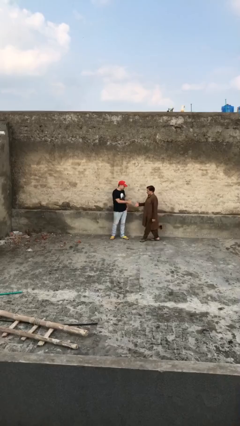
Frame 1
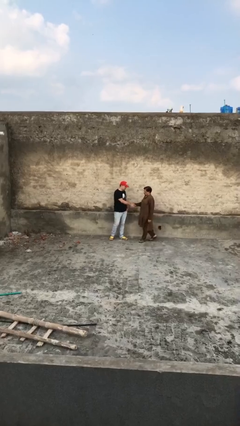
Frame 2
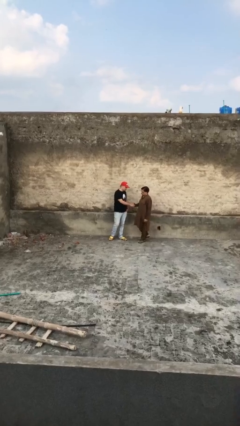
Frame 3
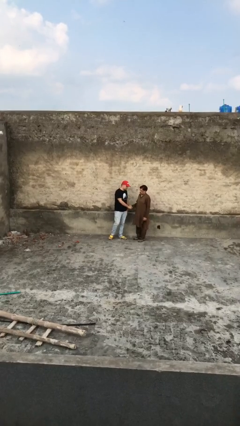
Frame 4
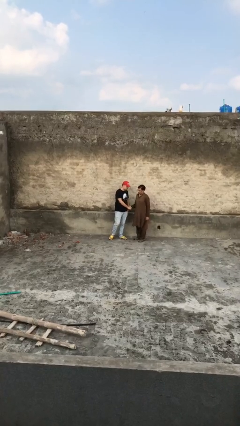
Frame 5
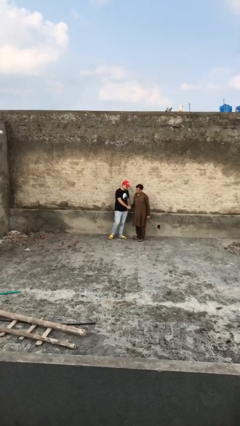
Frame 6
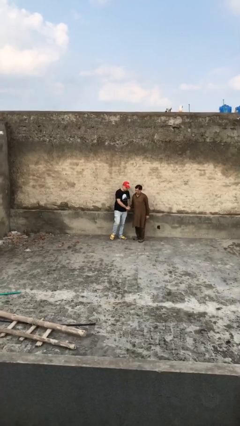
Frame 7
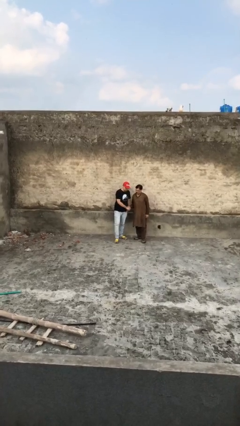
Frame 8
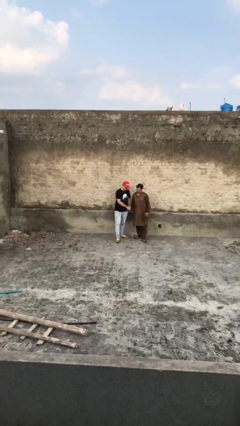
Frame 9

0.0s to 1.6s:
person shakes hand

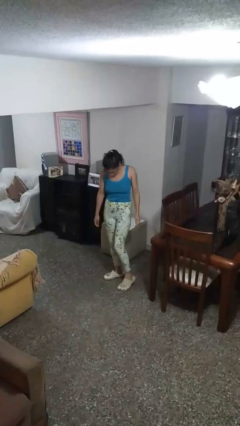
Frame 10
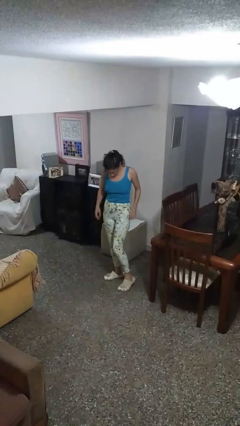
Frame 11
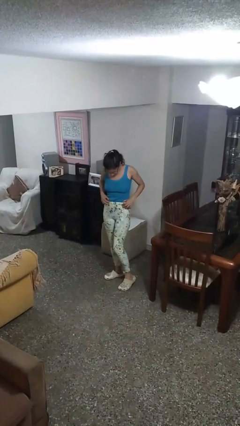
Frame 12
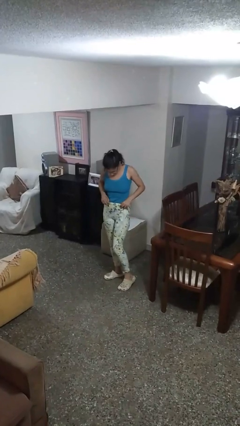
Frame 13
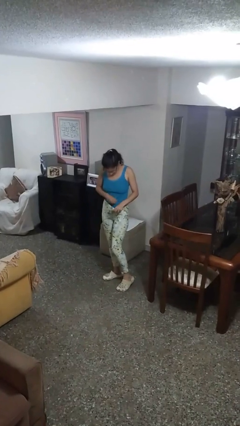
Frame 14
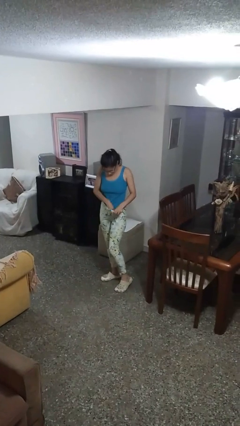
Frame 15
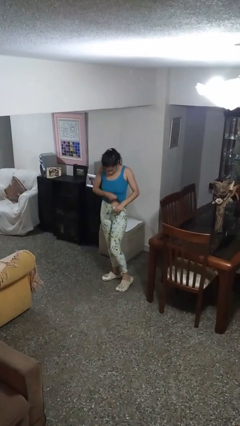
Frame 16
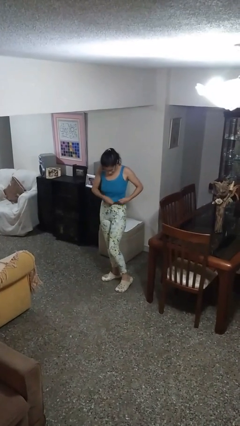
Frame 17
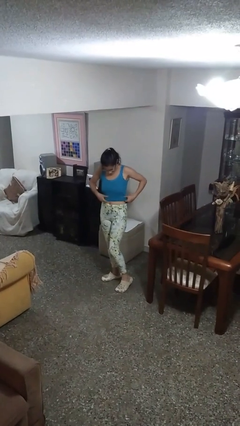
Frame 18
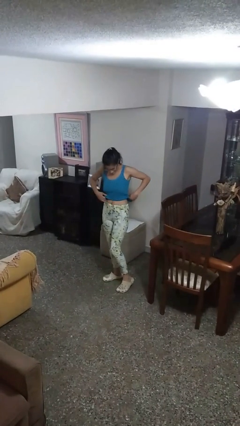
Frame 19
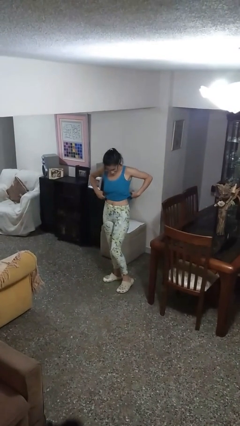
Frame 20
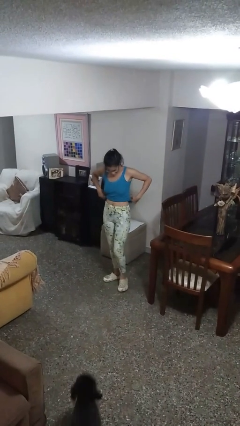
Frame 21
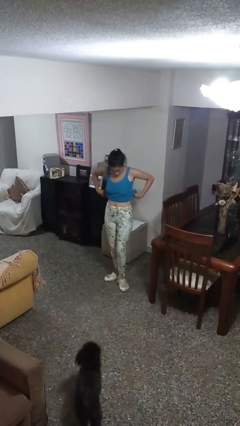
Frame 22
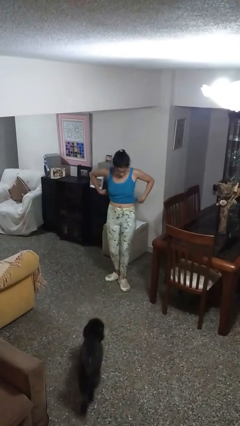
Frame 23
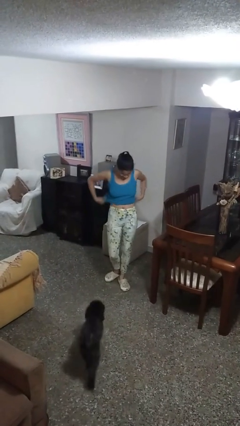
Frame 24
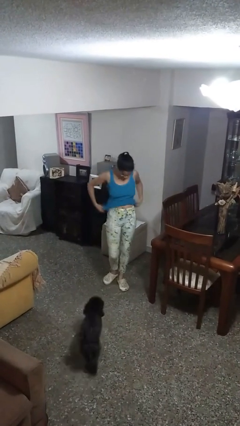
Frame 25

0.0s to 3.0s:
person untucks shirt

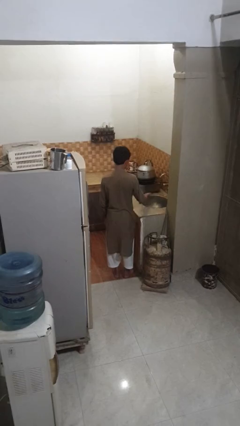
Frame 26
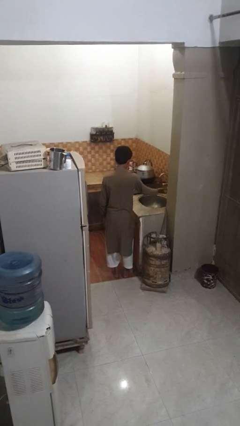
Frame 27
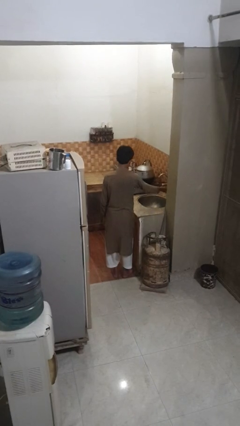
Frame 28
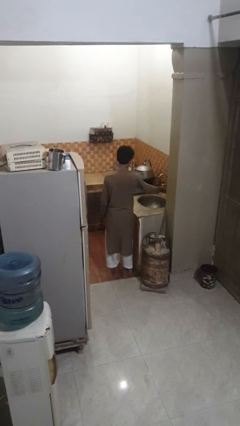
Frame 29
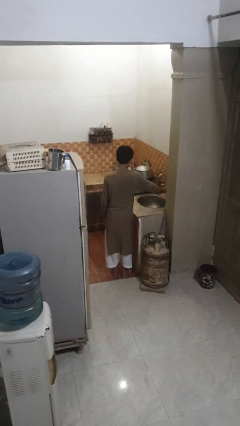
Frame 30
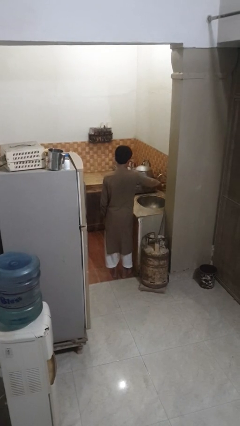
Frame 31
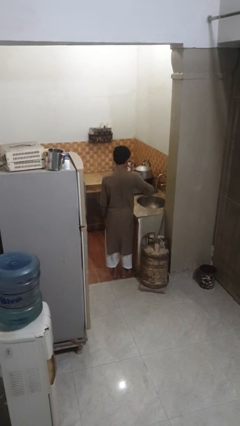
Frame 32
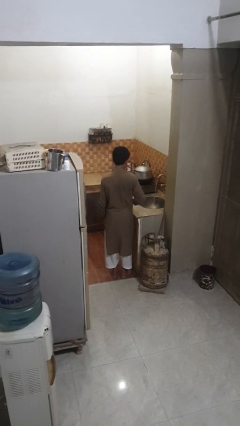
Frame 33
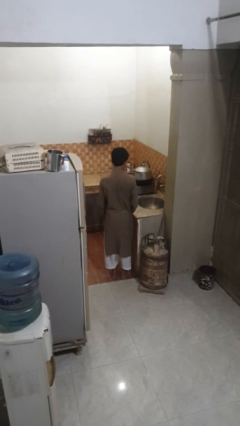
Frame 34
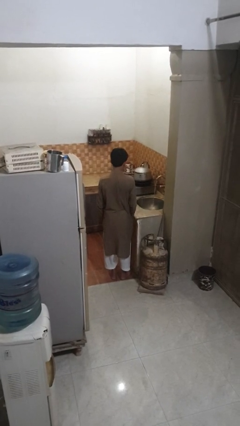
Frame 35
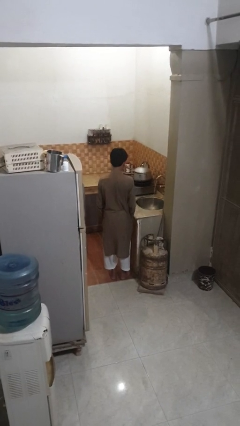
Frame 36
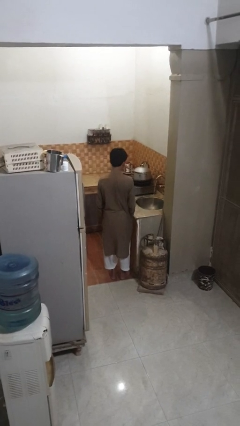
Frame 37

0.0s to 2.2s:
person turns on faucet

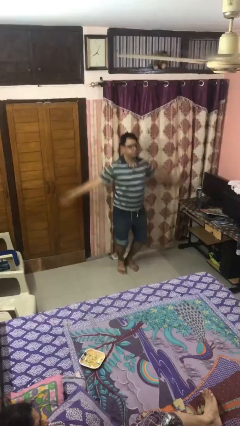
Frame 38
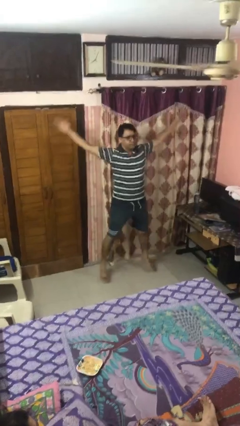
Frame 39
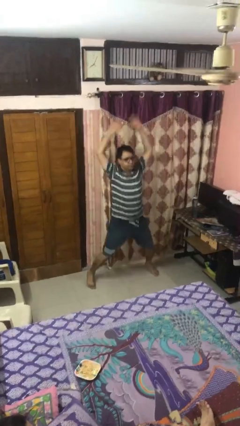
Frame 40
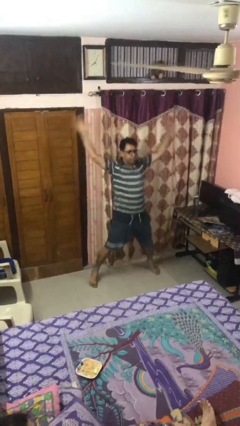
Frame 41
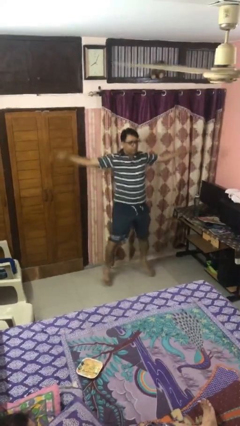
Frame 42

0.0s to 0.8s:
person exercises with jumping jacks

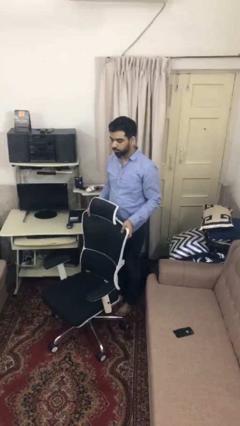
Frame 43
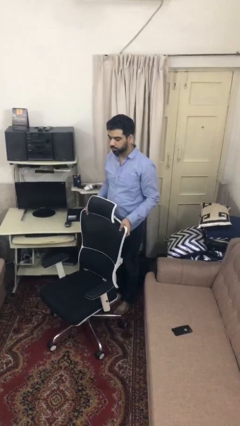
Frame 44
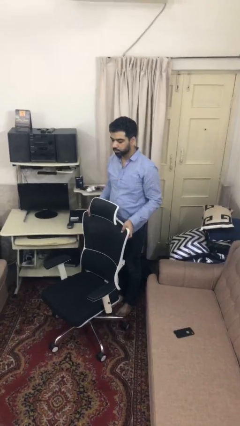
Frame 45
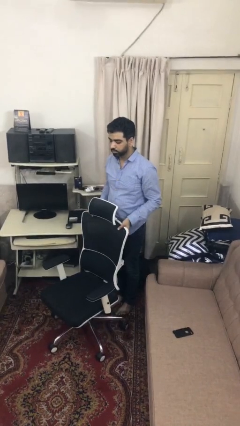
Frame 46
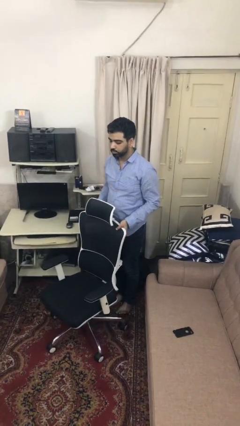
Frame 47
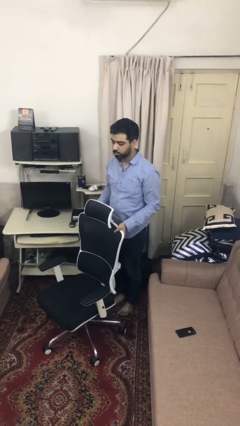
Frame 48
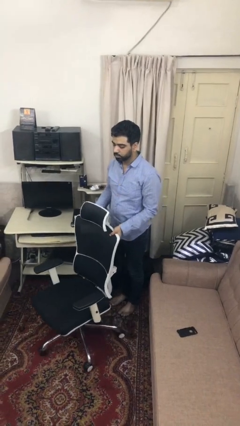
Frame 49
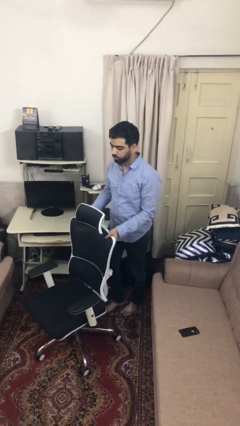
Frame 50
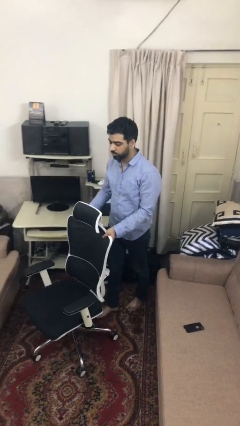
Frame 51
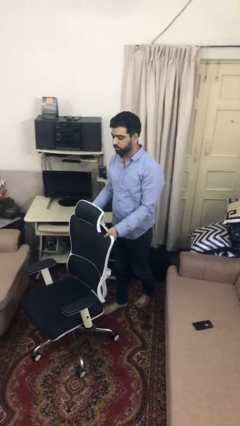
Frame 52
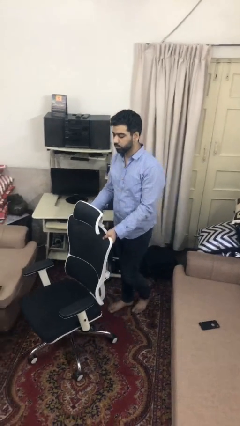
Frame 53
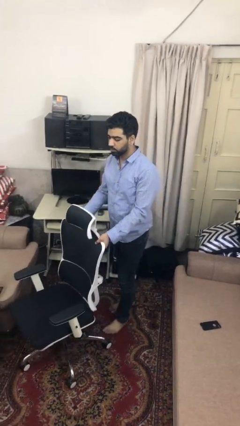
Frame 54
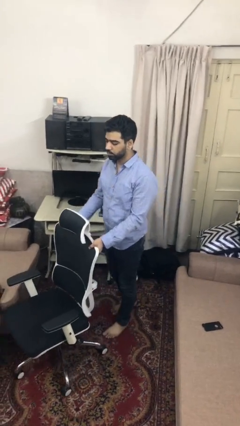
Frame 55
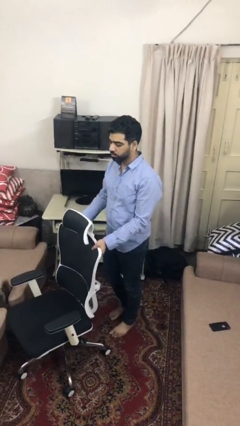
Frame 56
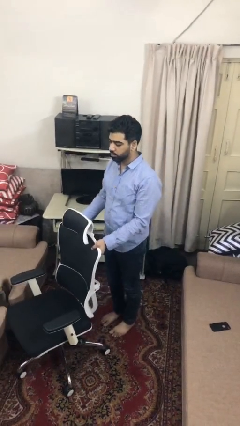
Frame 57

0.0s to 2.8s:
person pushes wheeled cart

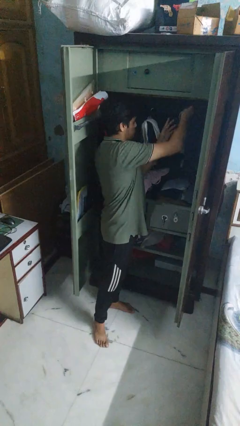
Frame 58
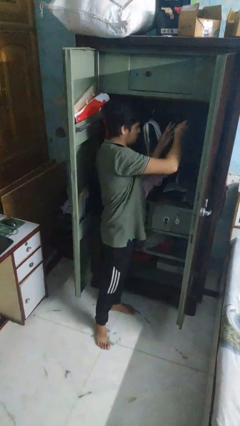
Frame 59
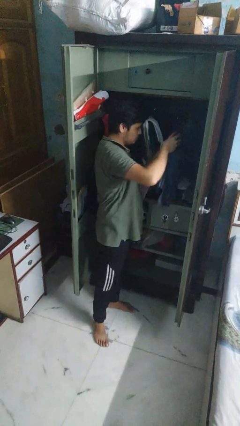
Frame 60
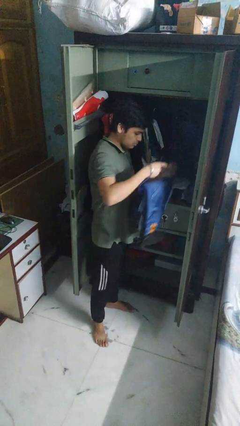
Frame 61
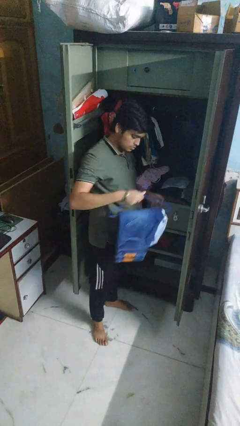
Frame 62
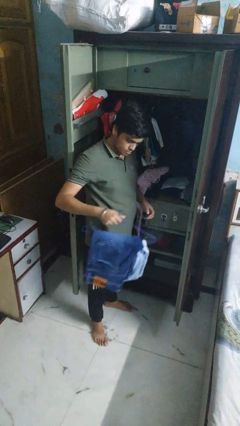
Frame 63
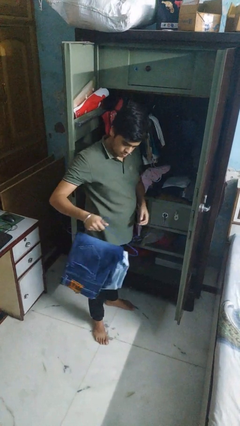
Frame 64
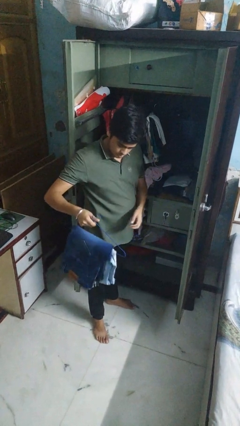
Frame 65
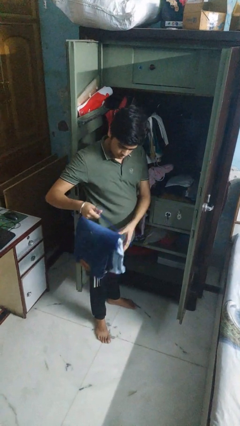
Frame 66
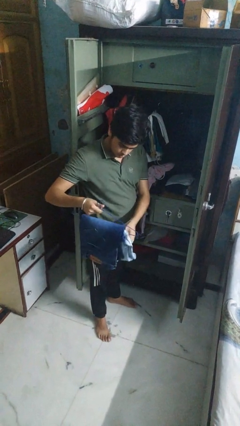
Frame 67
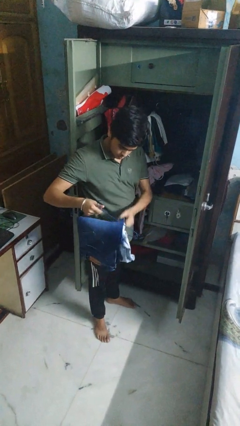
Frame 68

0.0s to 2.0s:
person takes clothes from closet

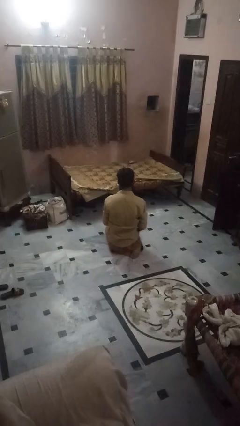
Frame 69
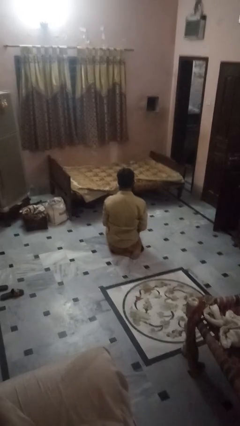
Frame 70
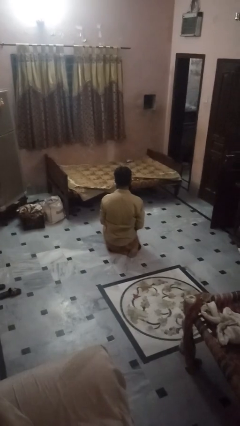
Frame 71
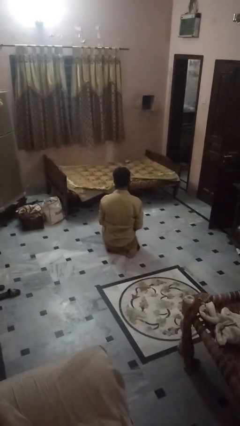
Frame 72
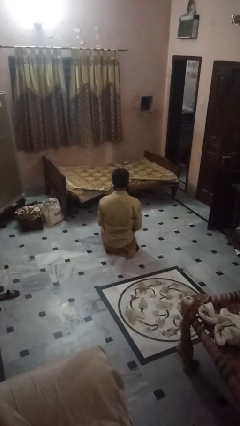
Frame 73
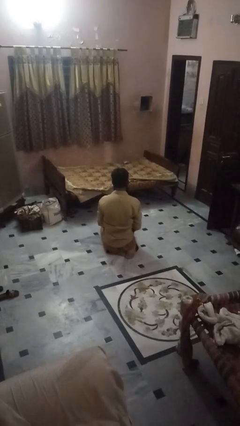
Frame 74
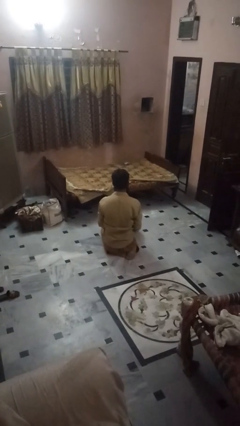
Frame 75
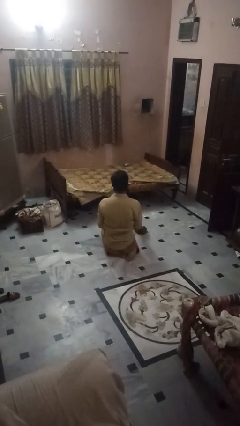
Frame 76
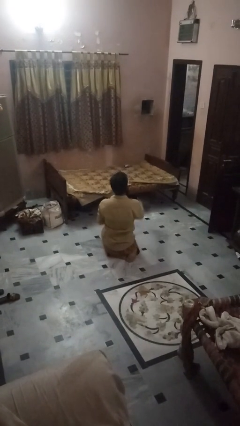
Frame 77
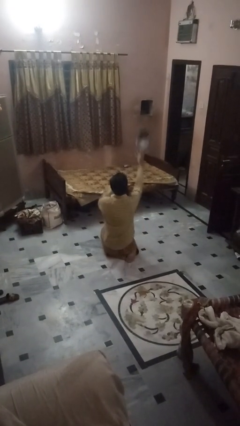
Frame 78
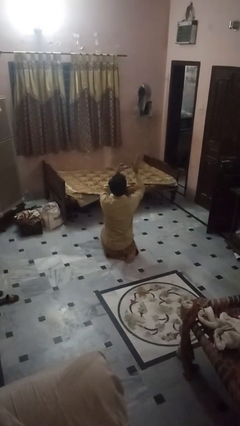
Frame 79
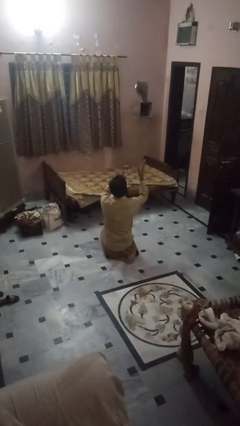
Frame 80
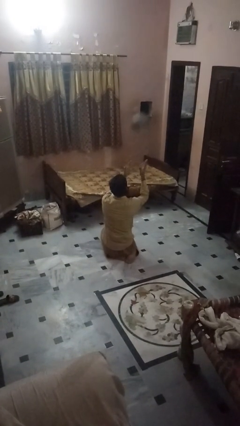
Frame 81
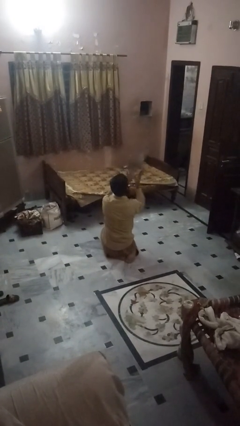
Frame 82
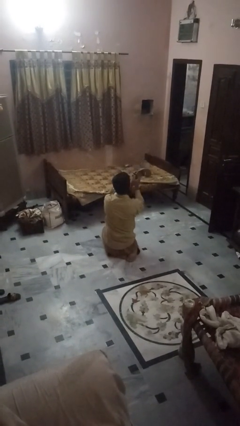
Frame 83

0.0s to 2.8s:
person drops object

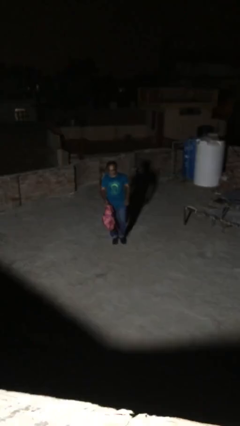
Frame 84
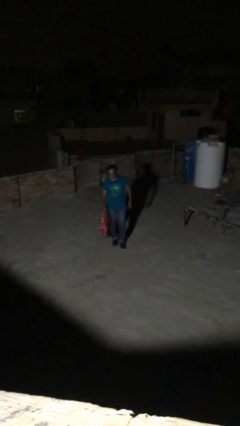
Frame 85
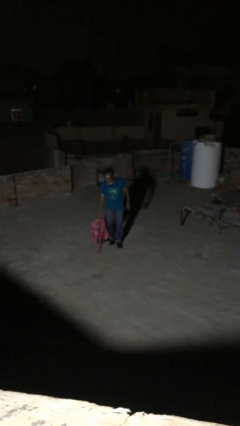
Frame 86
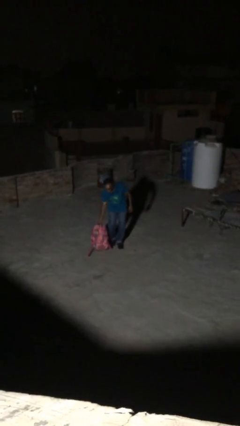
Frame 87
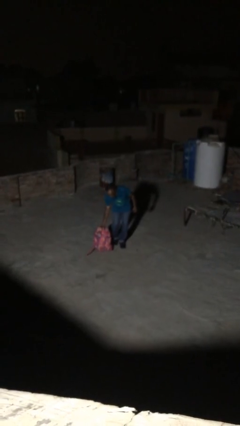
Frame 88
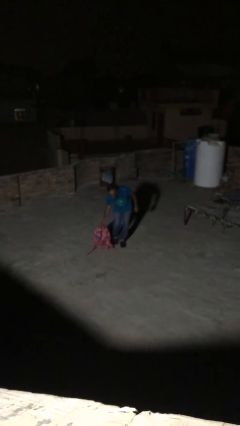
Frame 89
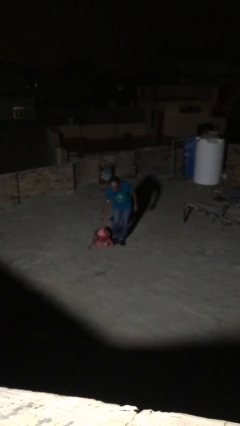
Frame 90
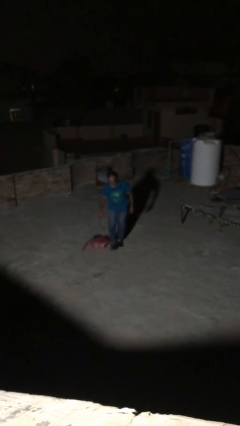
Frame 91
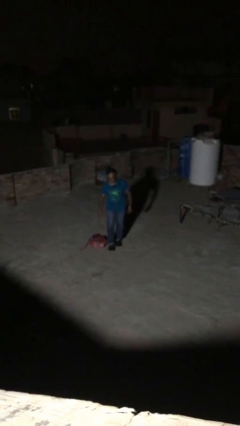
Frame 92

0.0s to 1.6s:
person puts down object on floor
